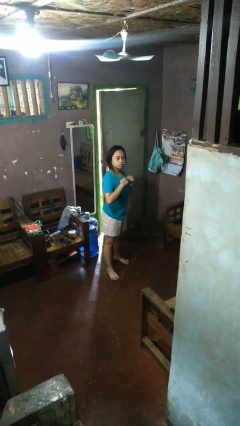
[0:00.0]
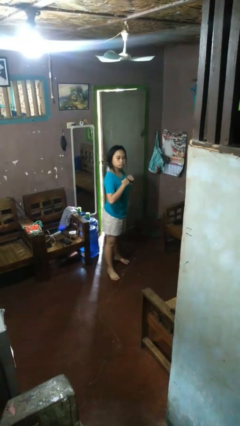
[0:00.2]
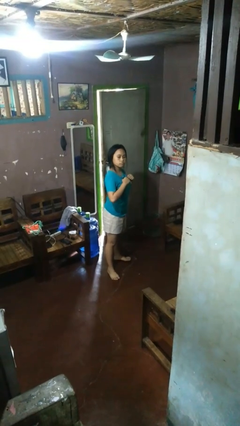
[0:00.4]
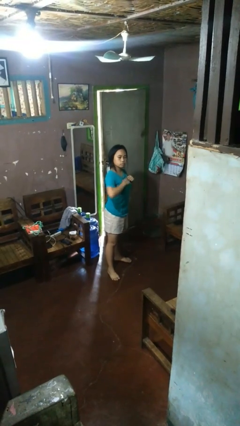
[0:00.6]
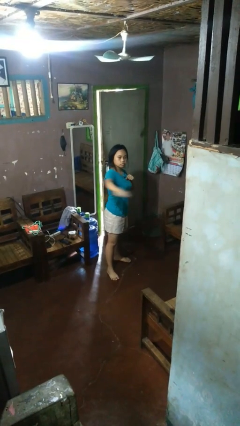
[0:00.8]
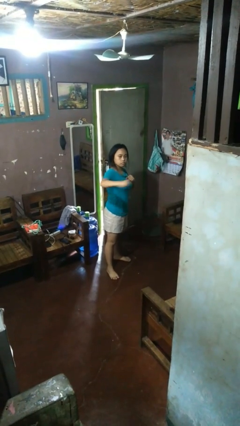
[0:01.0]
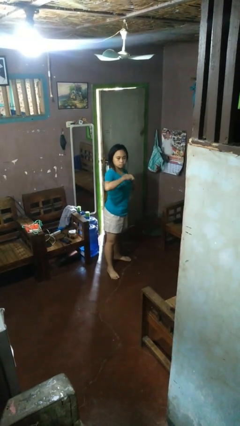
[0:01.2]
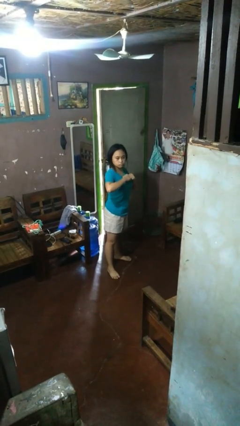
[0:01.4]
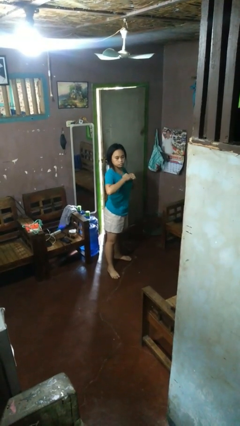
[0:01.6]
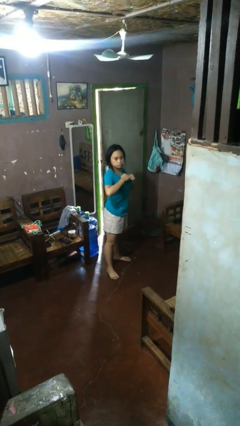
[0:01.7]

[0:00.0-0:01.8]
person karate chop

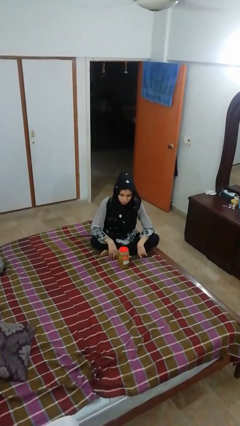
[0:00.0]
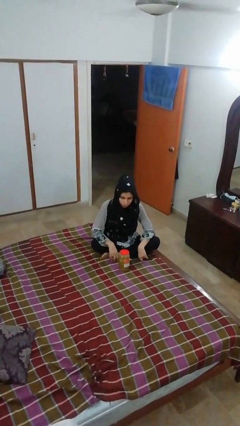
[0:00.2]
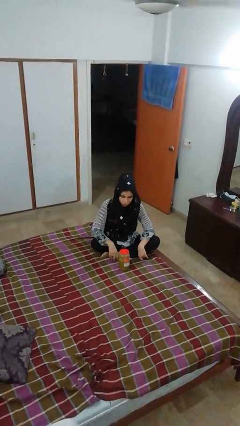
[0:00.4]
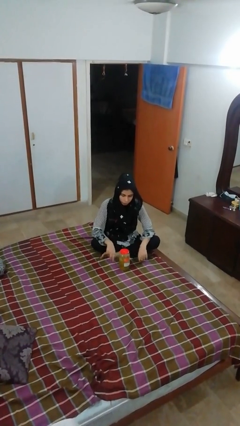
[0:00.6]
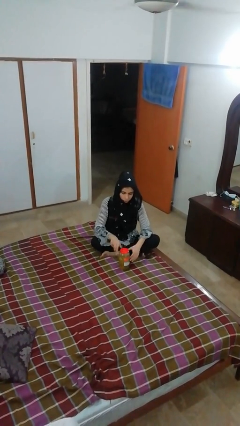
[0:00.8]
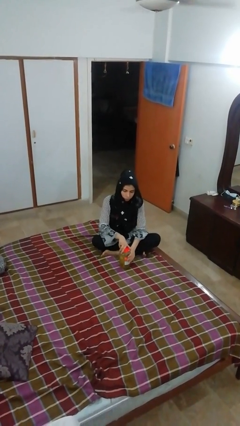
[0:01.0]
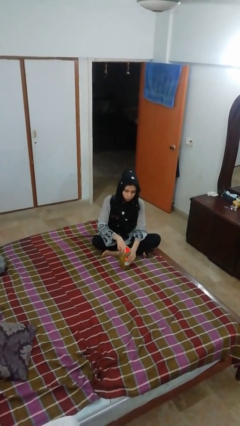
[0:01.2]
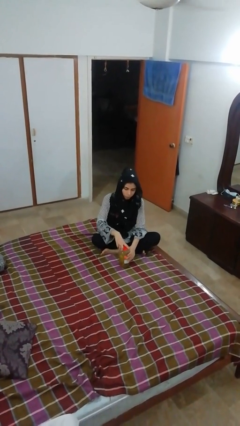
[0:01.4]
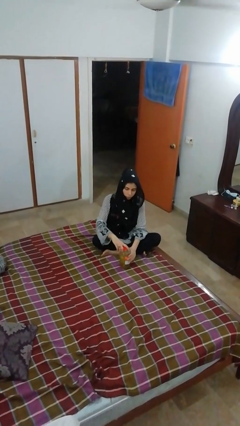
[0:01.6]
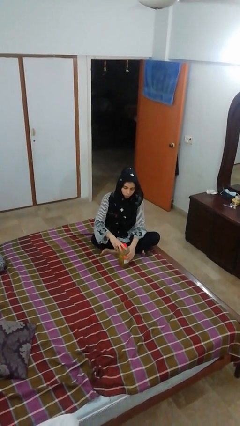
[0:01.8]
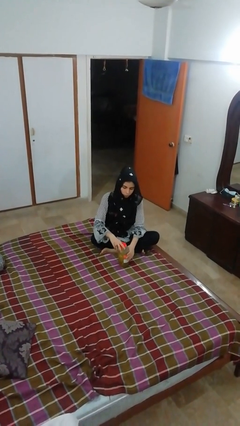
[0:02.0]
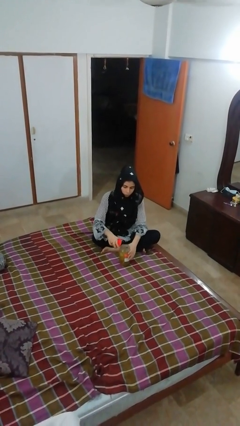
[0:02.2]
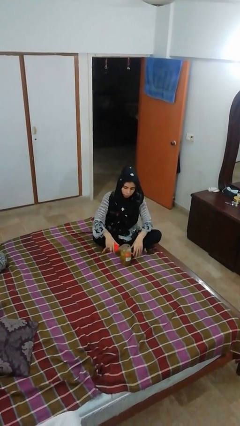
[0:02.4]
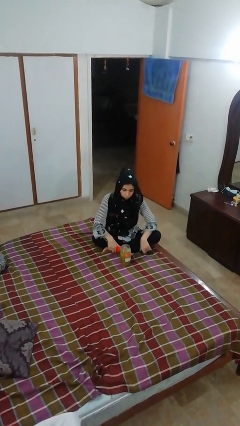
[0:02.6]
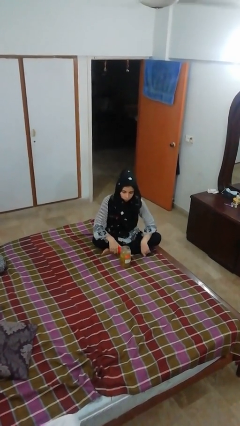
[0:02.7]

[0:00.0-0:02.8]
person opens jar

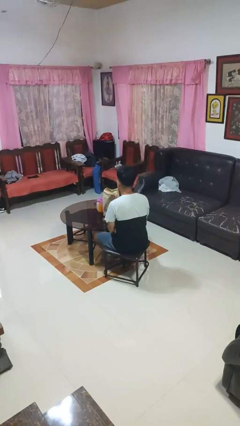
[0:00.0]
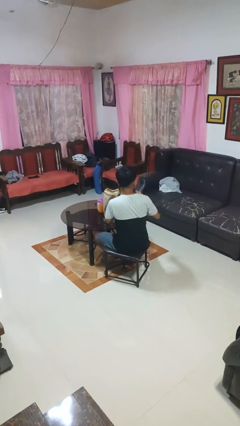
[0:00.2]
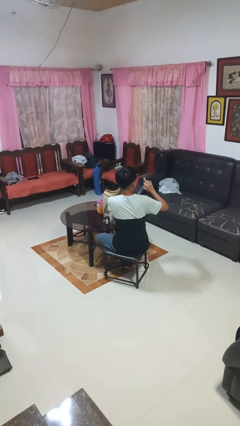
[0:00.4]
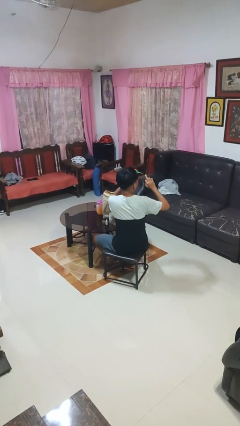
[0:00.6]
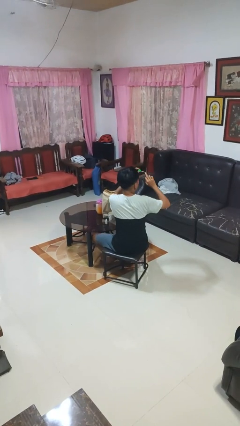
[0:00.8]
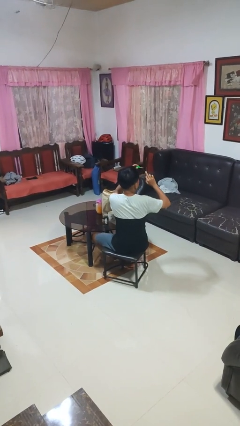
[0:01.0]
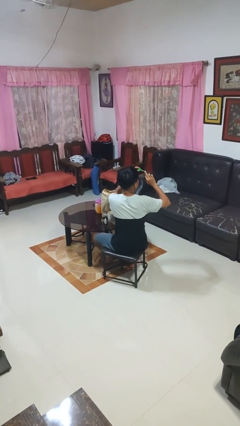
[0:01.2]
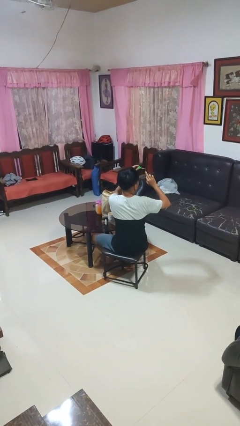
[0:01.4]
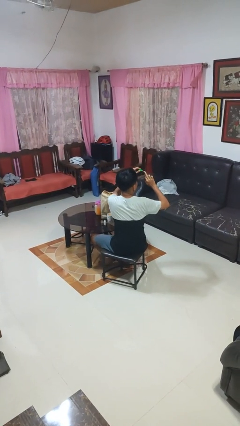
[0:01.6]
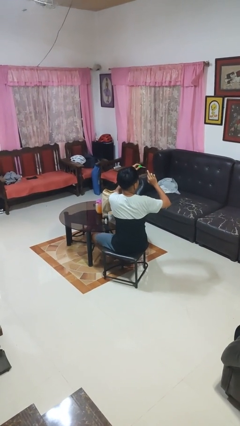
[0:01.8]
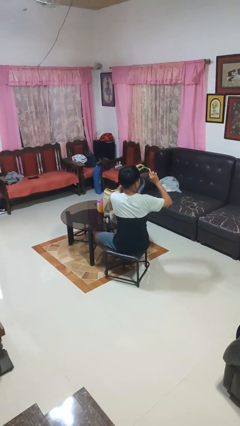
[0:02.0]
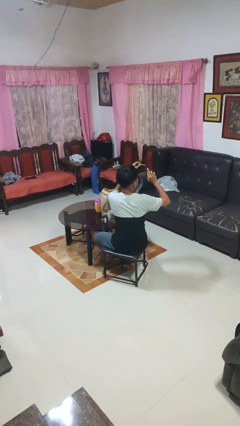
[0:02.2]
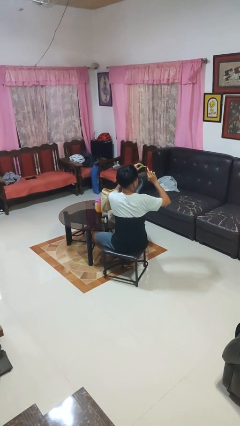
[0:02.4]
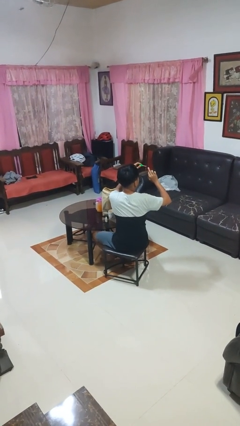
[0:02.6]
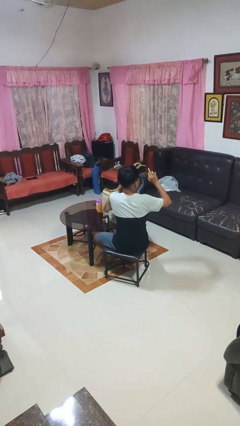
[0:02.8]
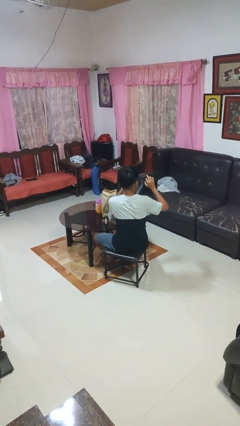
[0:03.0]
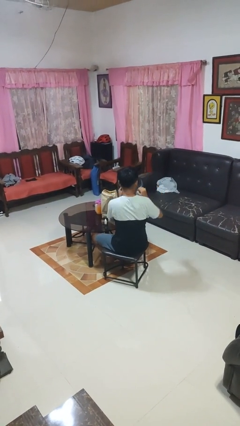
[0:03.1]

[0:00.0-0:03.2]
person paints fingernails

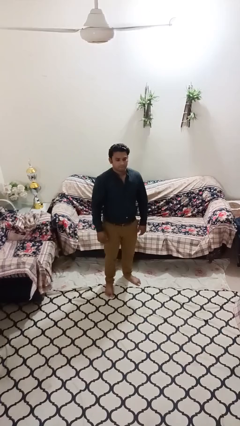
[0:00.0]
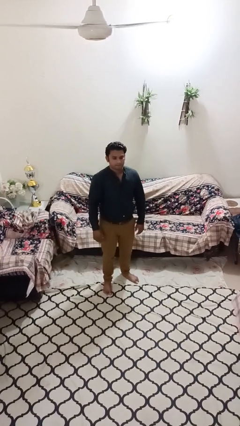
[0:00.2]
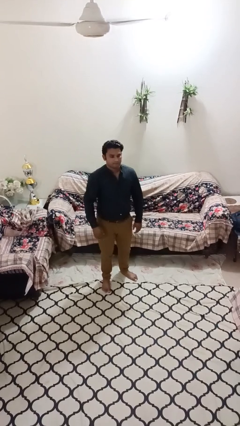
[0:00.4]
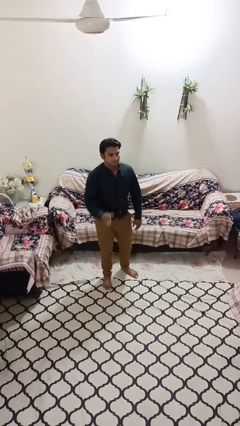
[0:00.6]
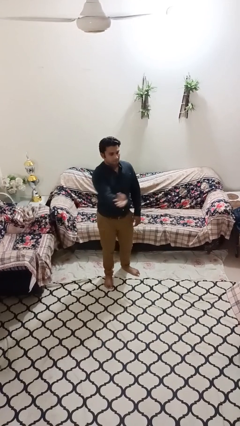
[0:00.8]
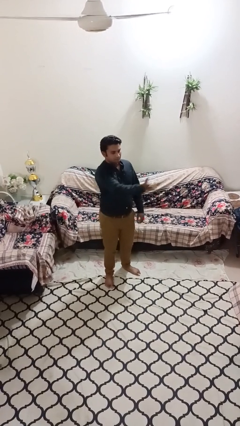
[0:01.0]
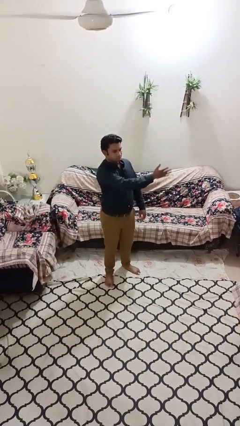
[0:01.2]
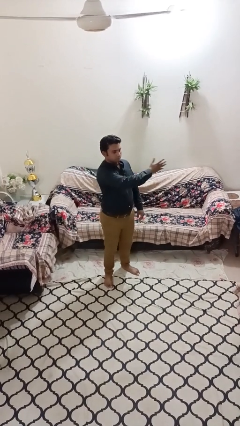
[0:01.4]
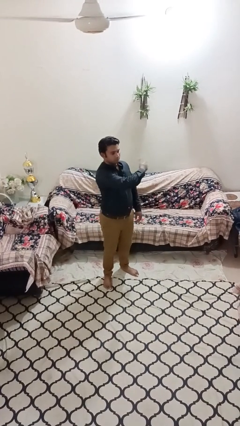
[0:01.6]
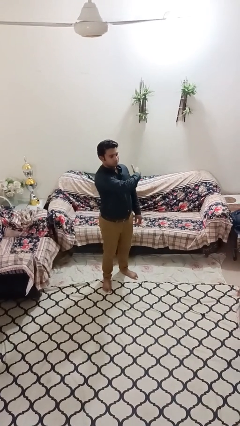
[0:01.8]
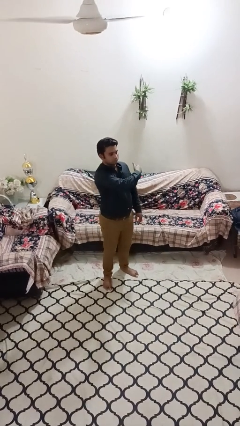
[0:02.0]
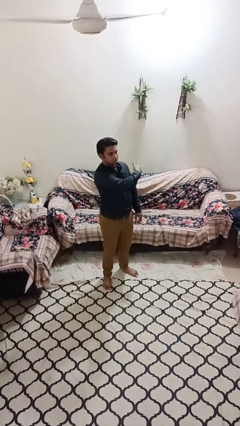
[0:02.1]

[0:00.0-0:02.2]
person gestures swipe left

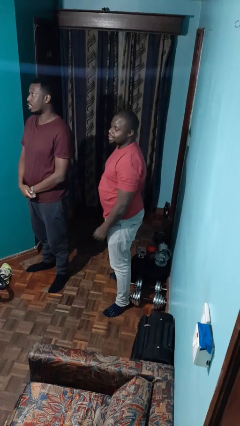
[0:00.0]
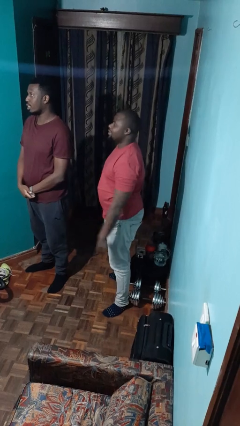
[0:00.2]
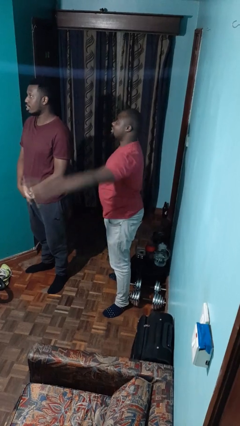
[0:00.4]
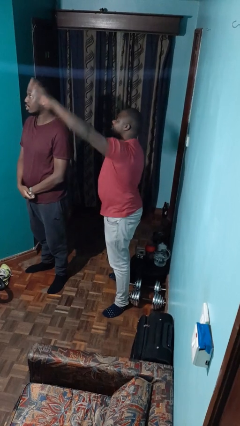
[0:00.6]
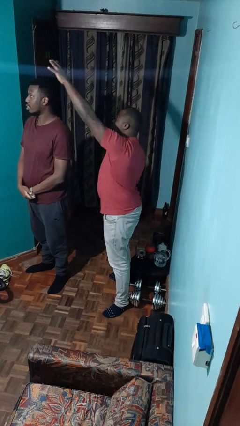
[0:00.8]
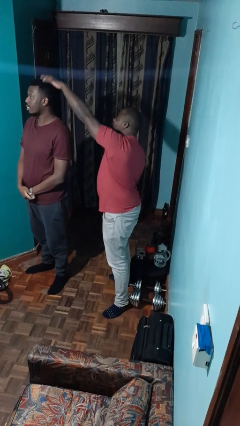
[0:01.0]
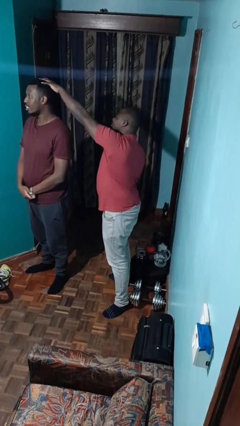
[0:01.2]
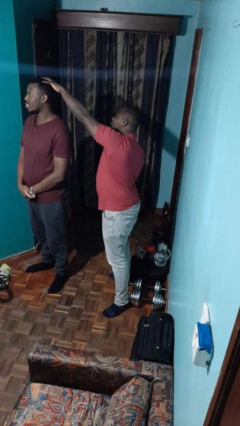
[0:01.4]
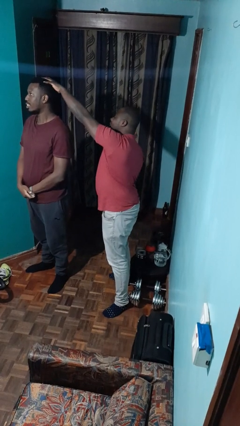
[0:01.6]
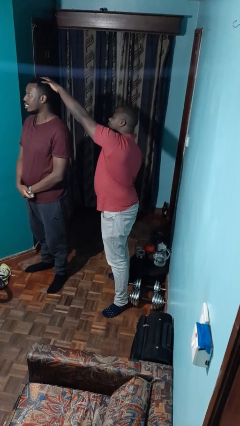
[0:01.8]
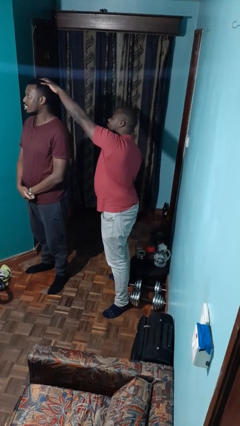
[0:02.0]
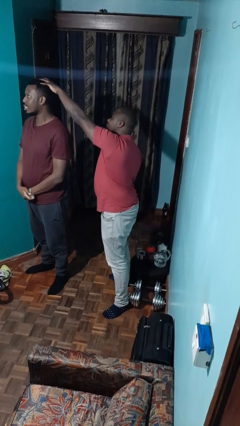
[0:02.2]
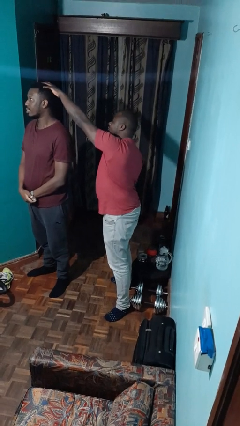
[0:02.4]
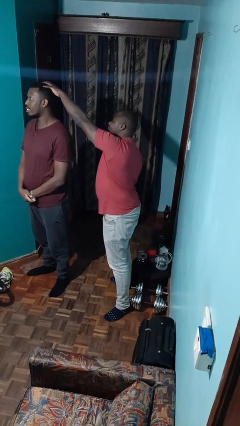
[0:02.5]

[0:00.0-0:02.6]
person grabs person by hair

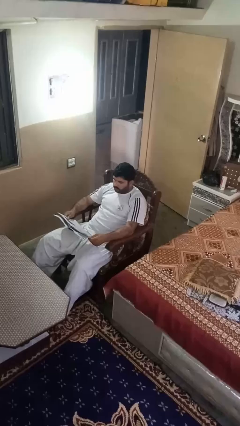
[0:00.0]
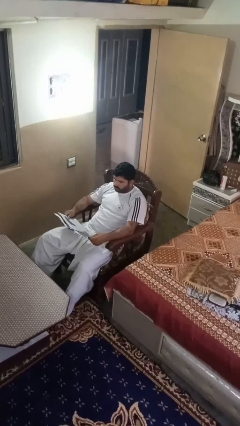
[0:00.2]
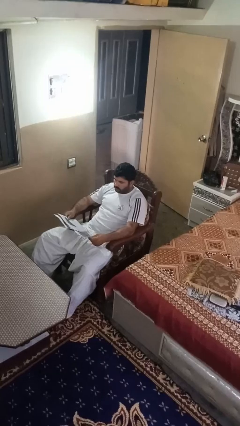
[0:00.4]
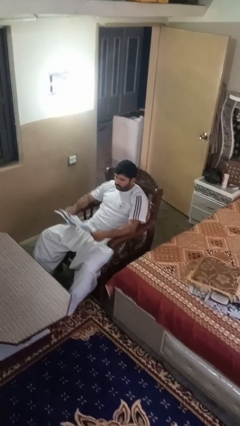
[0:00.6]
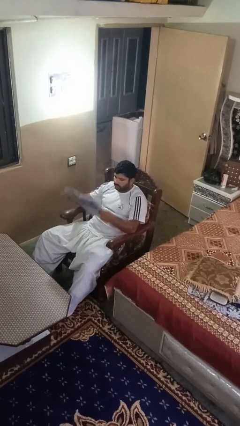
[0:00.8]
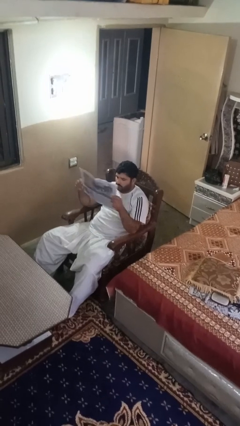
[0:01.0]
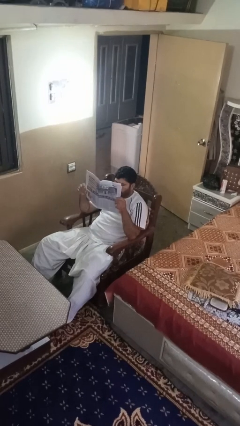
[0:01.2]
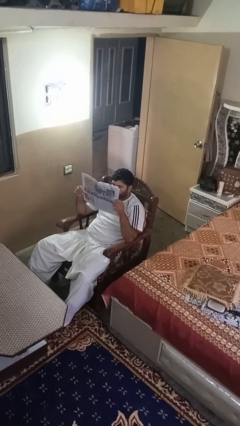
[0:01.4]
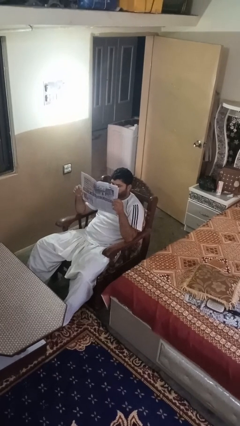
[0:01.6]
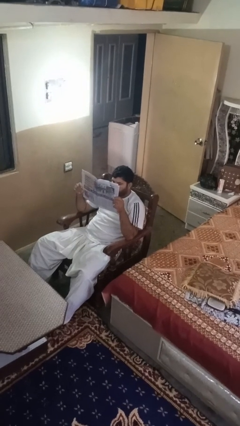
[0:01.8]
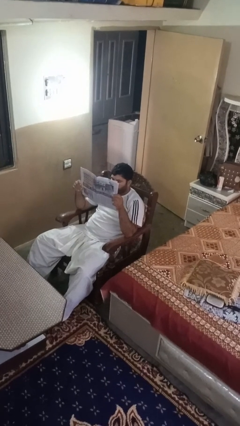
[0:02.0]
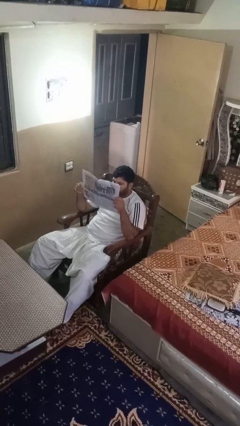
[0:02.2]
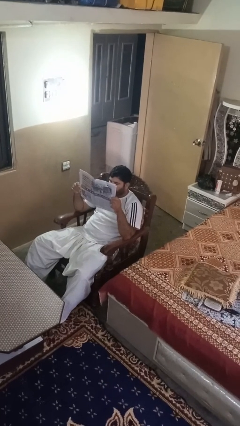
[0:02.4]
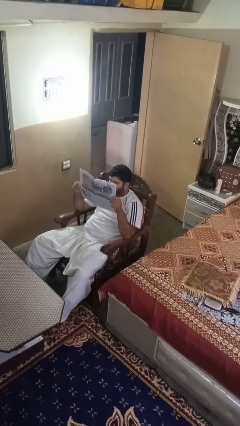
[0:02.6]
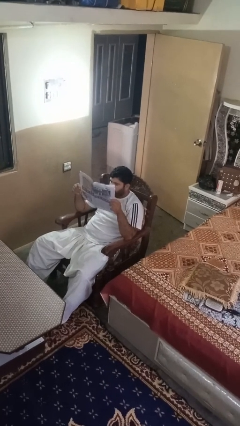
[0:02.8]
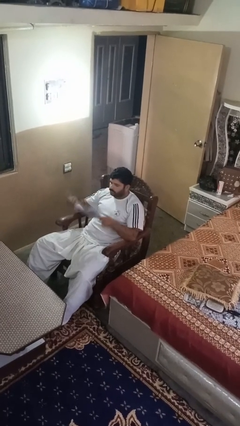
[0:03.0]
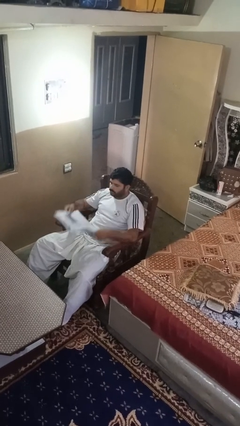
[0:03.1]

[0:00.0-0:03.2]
person reads newspaper

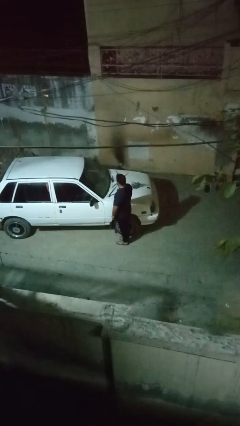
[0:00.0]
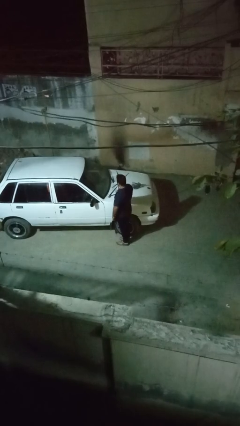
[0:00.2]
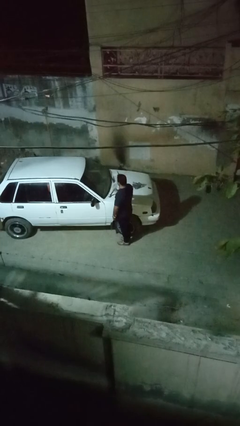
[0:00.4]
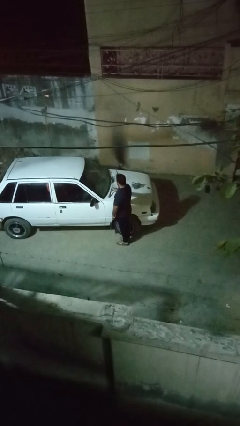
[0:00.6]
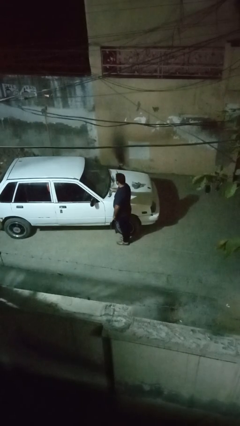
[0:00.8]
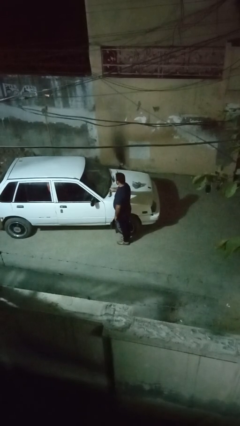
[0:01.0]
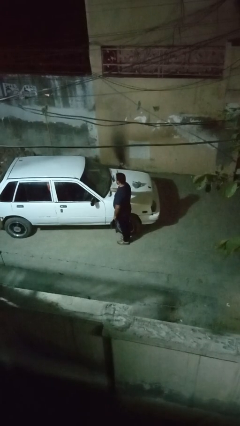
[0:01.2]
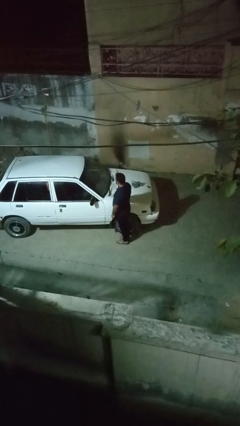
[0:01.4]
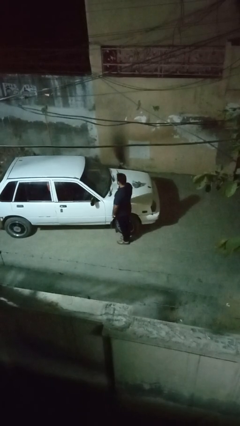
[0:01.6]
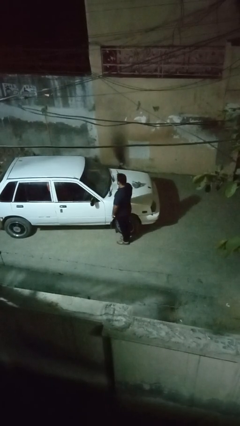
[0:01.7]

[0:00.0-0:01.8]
person flips down car wipers
